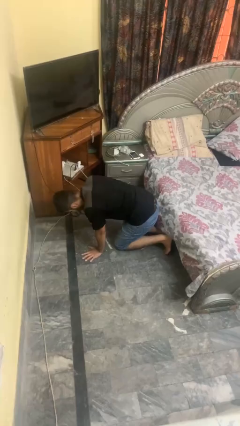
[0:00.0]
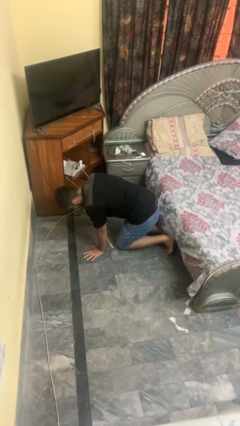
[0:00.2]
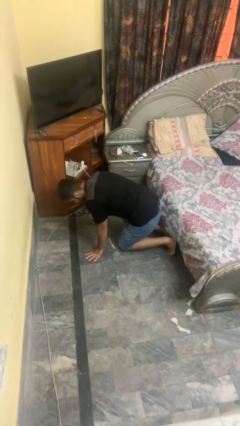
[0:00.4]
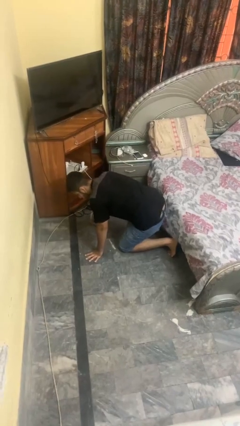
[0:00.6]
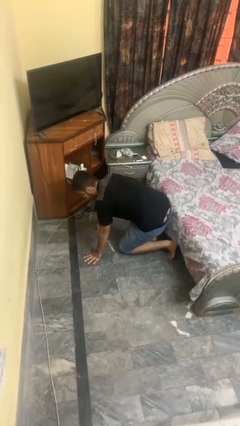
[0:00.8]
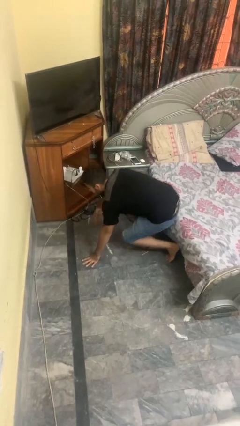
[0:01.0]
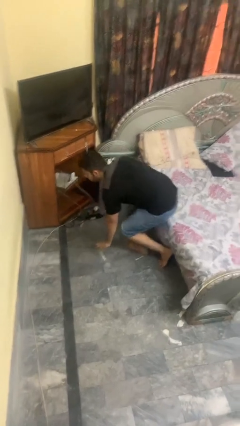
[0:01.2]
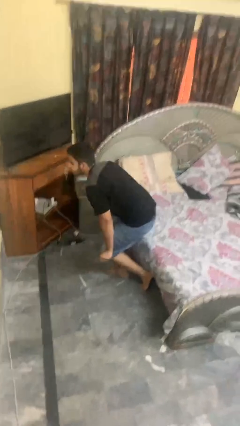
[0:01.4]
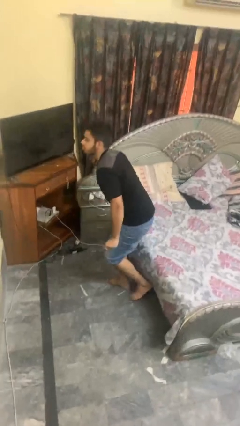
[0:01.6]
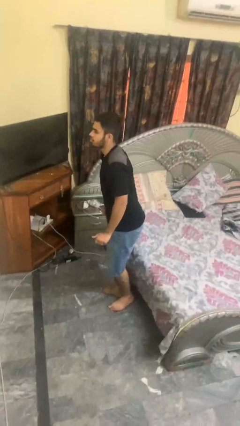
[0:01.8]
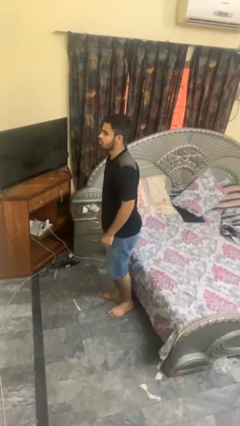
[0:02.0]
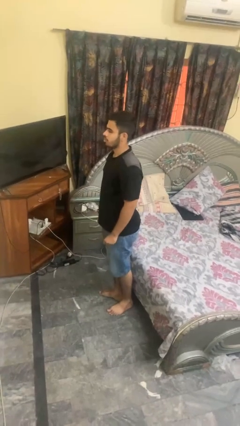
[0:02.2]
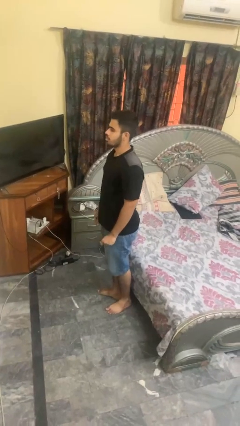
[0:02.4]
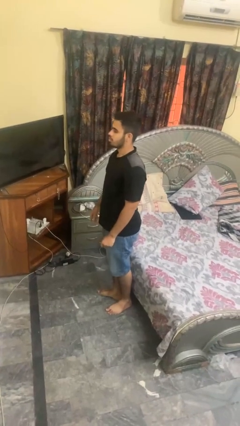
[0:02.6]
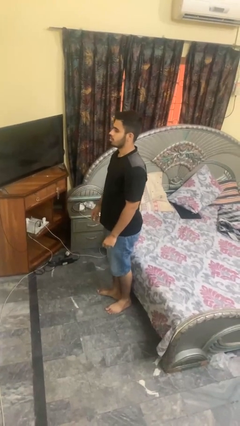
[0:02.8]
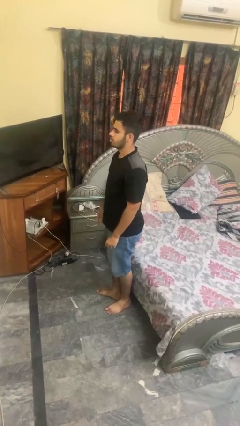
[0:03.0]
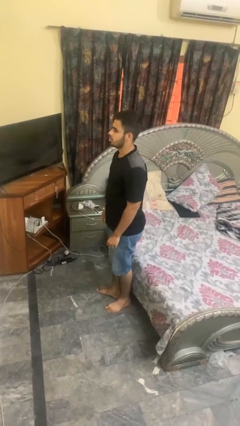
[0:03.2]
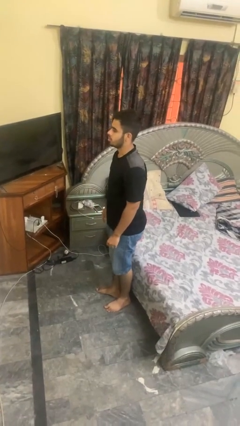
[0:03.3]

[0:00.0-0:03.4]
person stands up from floor

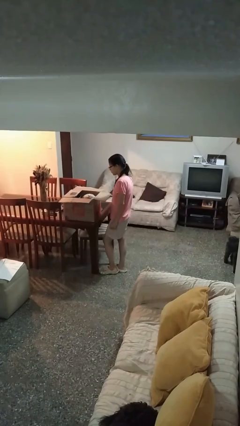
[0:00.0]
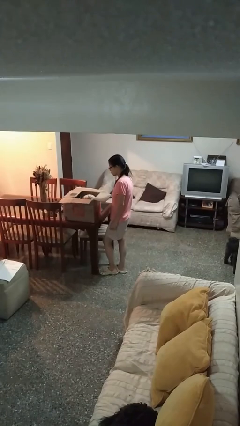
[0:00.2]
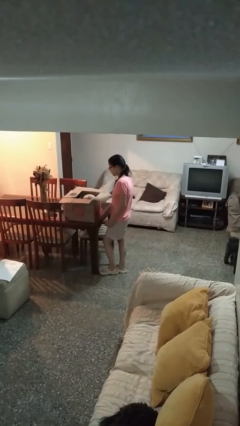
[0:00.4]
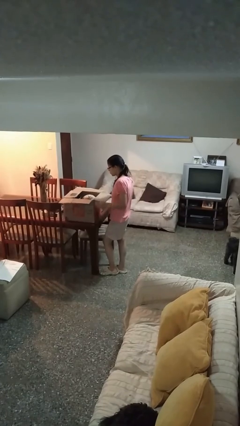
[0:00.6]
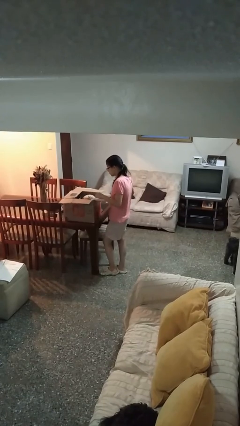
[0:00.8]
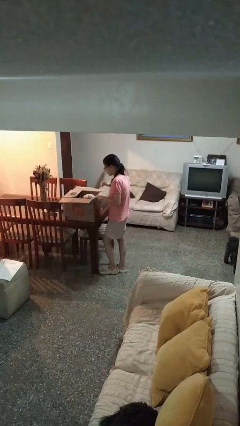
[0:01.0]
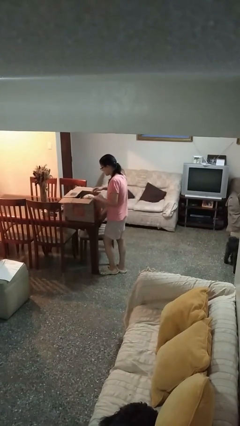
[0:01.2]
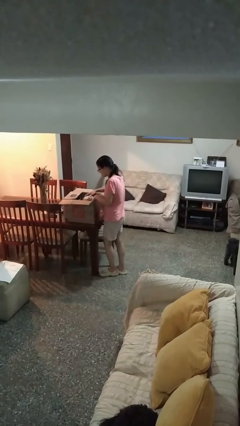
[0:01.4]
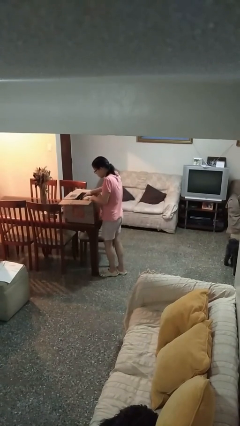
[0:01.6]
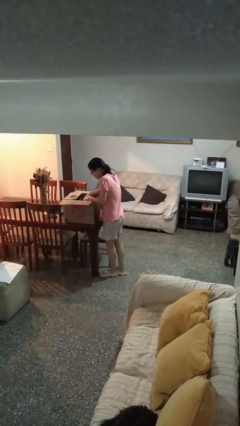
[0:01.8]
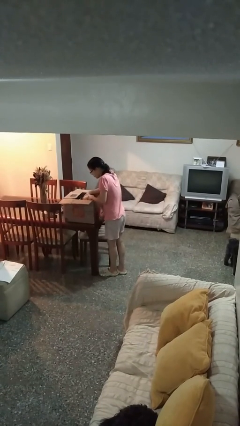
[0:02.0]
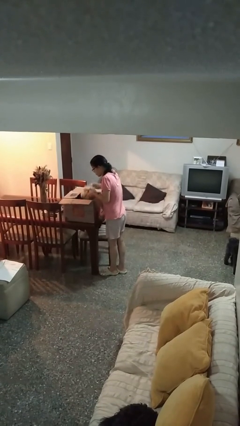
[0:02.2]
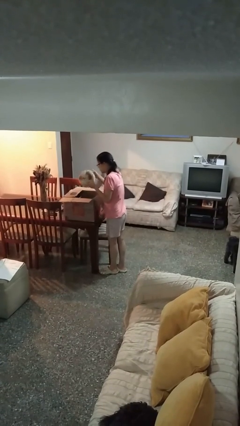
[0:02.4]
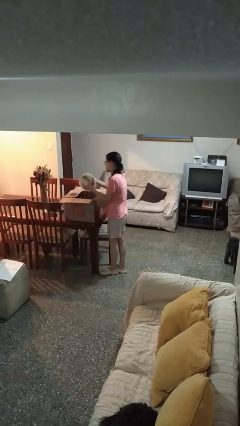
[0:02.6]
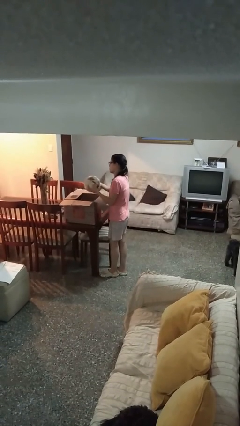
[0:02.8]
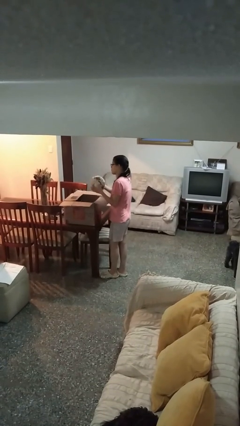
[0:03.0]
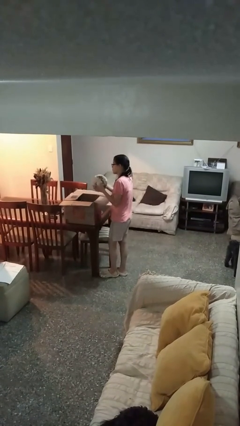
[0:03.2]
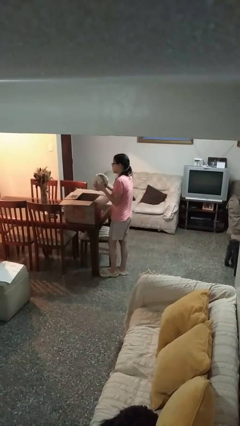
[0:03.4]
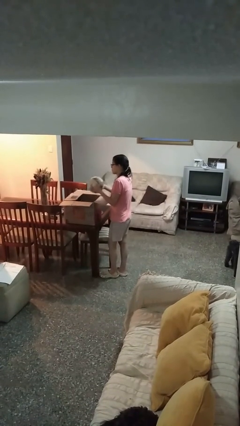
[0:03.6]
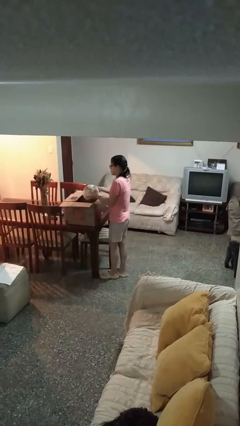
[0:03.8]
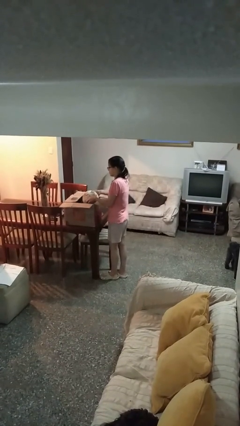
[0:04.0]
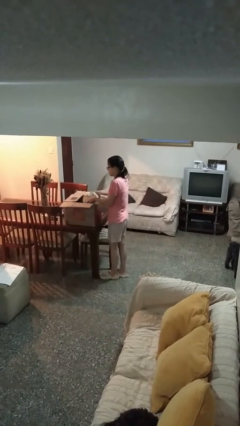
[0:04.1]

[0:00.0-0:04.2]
person searches in box

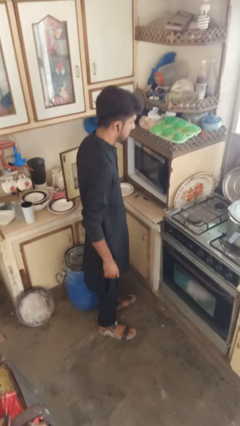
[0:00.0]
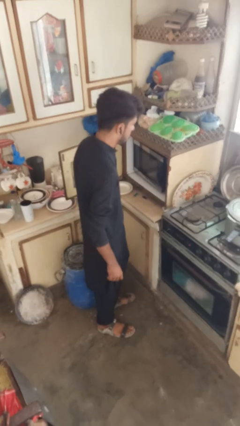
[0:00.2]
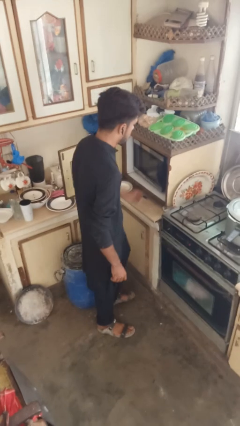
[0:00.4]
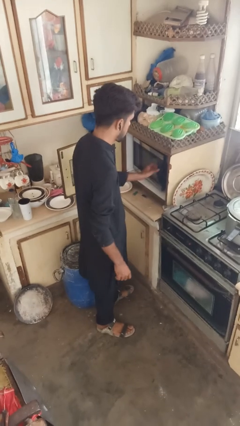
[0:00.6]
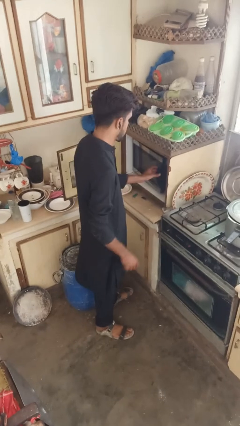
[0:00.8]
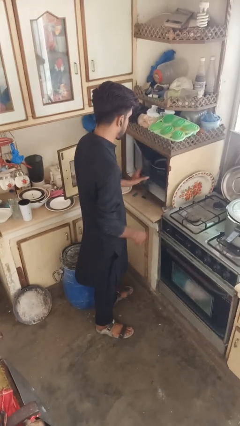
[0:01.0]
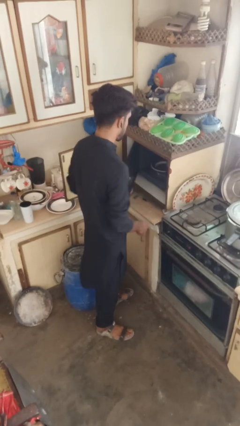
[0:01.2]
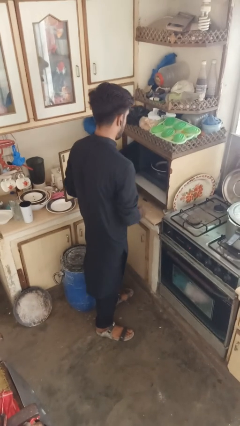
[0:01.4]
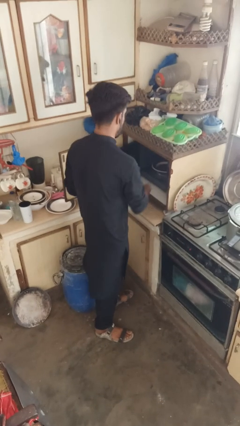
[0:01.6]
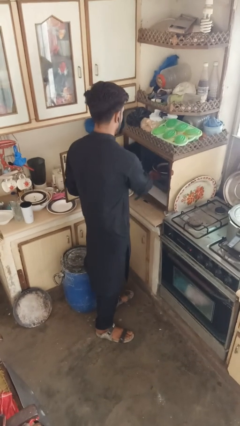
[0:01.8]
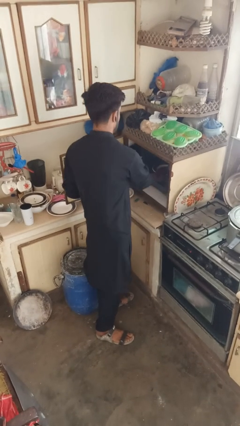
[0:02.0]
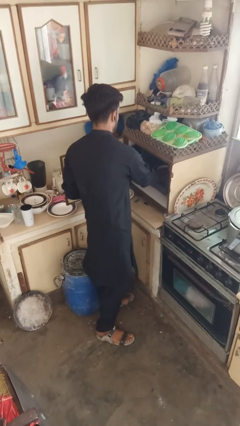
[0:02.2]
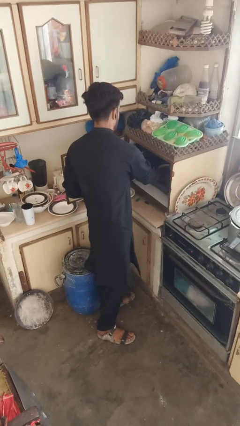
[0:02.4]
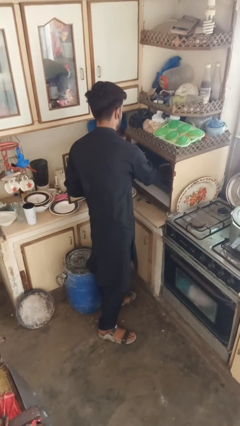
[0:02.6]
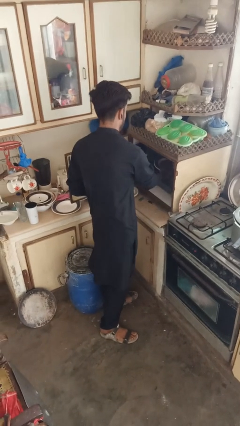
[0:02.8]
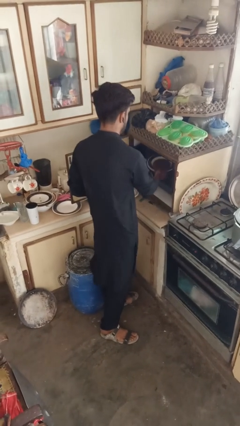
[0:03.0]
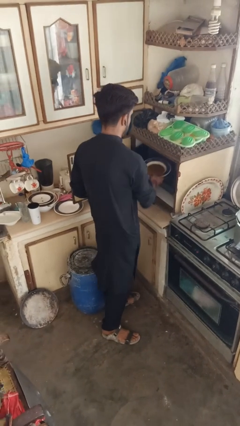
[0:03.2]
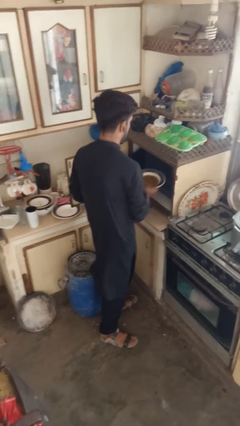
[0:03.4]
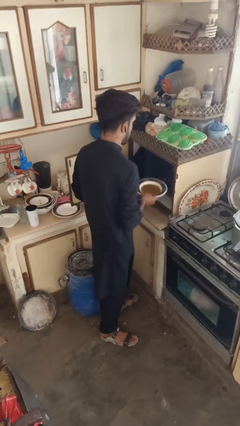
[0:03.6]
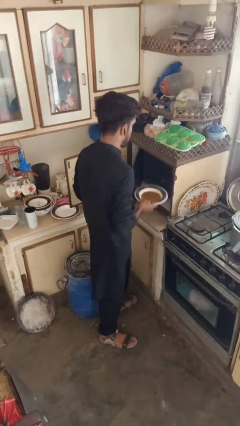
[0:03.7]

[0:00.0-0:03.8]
person takes object from microwave

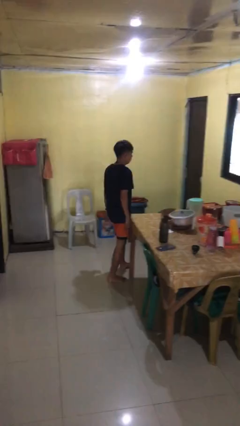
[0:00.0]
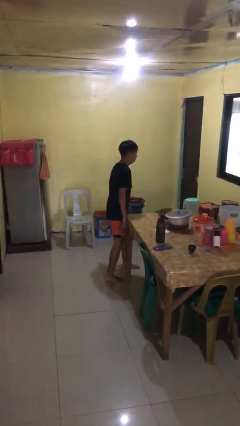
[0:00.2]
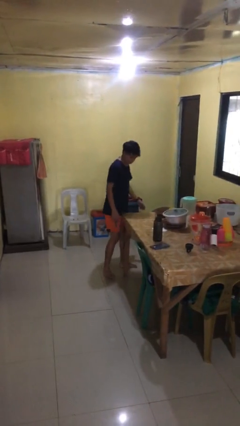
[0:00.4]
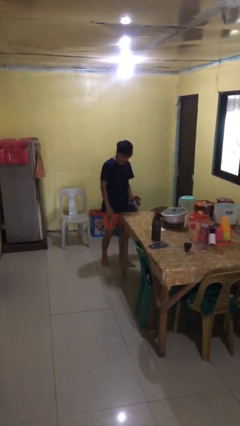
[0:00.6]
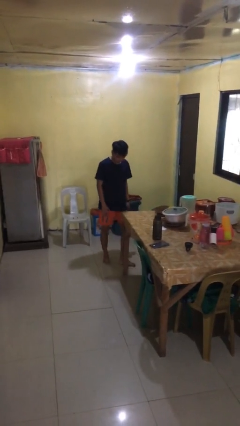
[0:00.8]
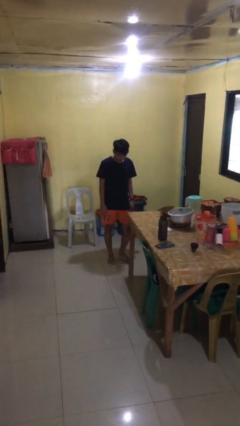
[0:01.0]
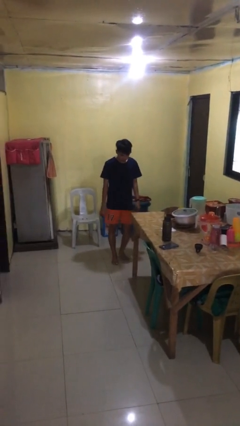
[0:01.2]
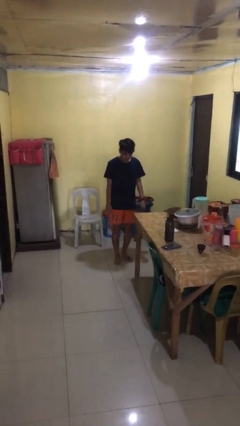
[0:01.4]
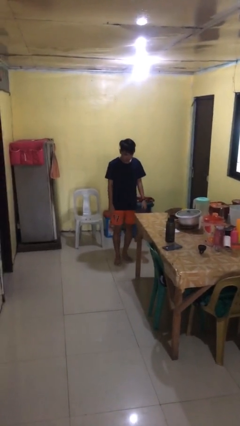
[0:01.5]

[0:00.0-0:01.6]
person bumps into table

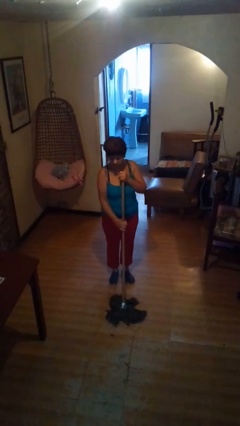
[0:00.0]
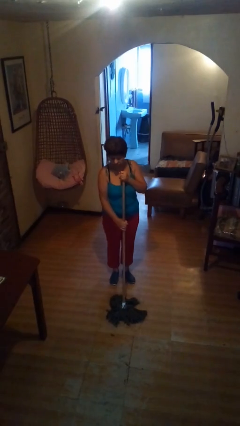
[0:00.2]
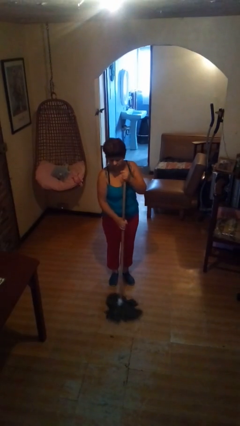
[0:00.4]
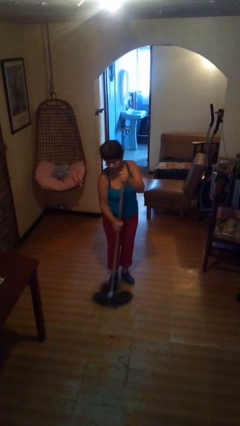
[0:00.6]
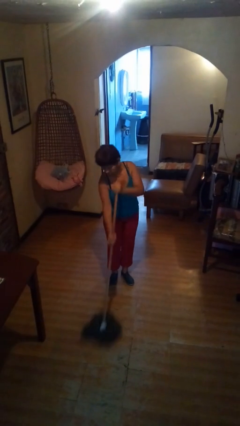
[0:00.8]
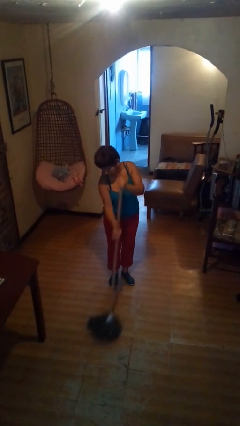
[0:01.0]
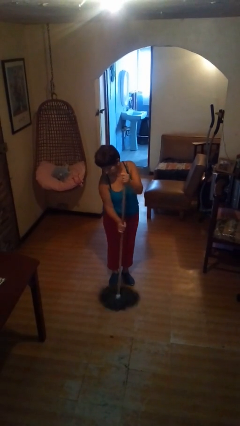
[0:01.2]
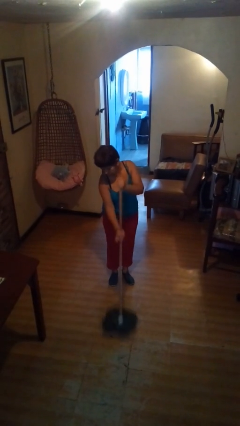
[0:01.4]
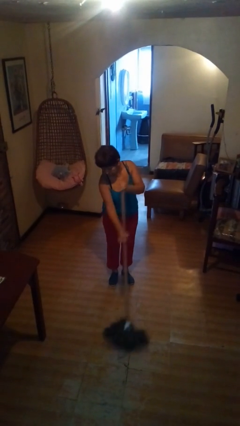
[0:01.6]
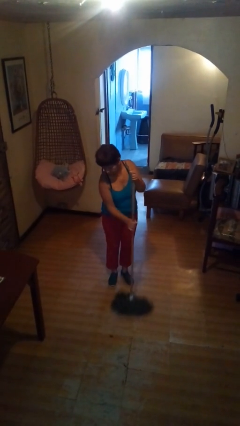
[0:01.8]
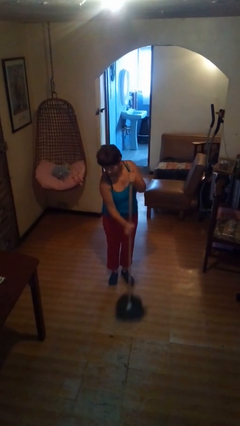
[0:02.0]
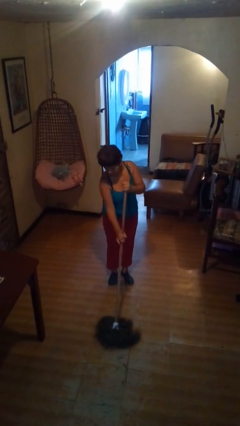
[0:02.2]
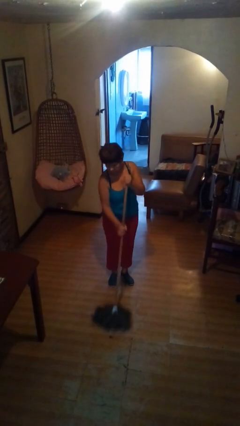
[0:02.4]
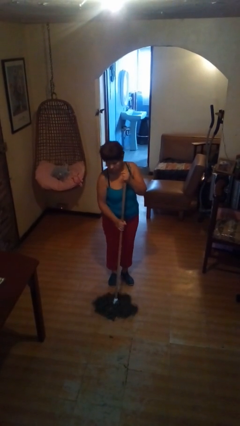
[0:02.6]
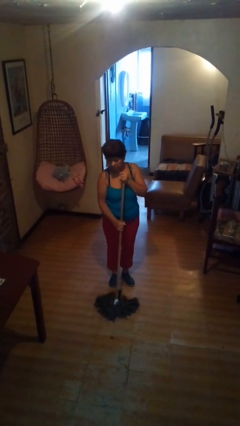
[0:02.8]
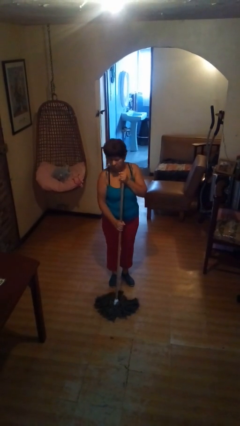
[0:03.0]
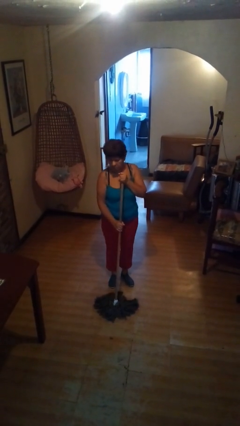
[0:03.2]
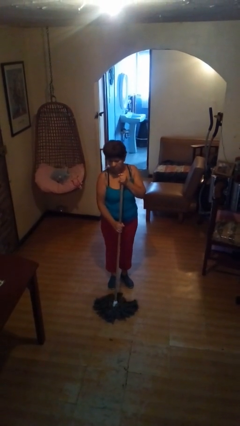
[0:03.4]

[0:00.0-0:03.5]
person mops

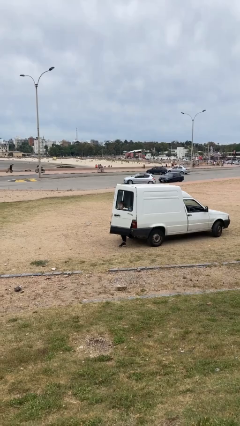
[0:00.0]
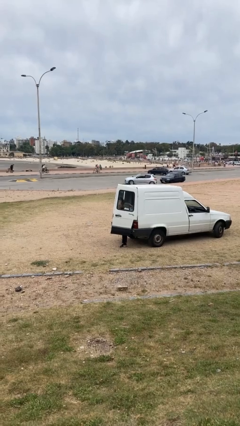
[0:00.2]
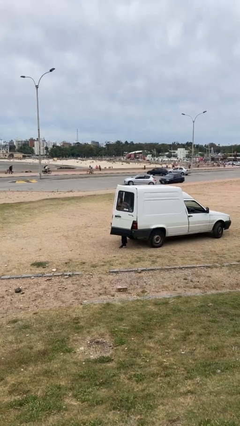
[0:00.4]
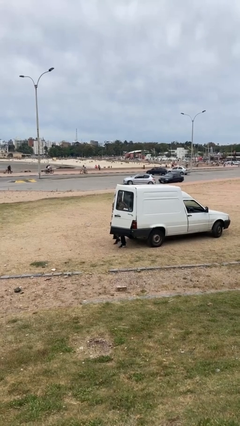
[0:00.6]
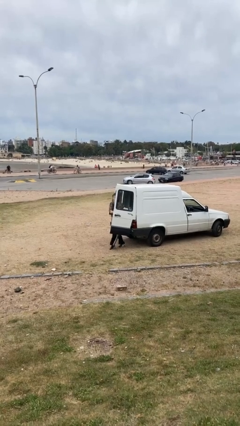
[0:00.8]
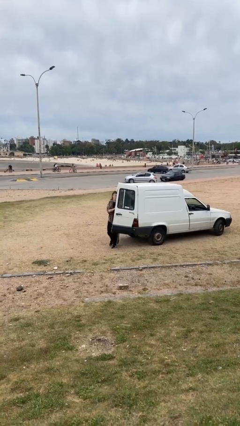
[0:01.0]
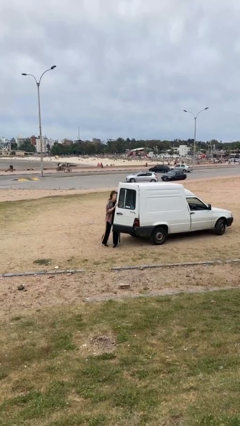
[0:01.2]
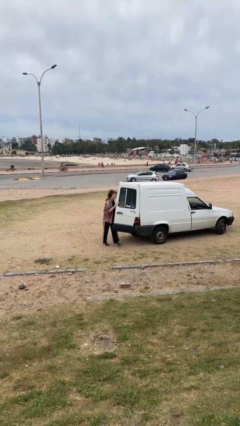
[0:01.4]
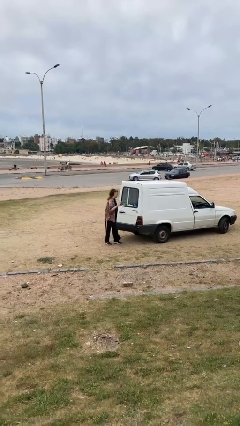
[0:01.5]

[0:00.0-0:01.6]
person exits car
